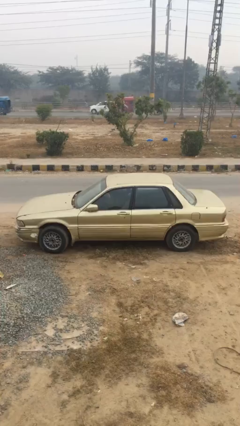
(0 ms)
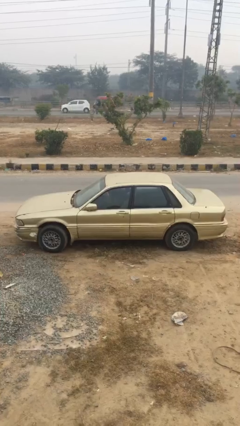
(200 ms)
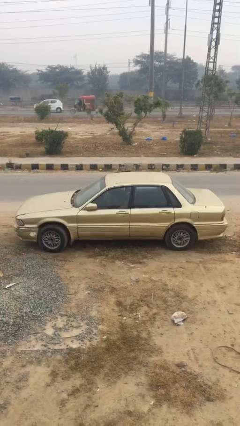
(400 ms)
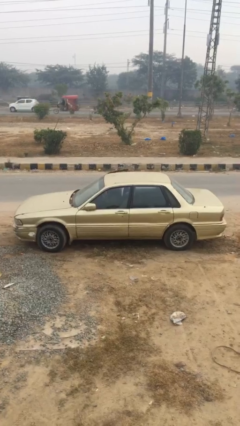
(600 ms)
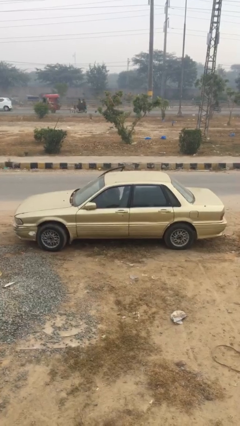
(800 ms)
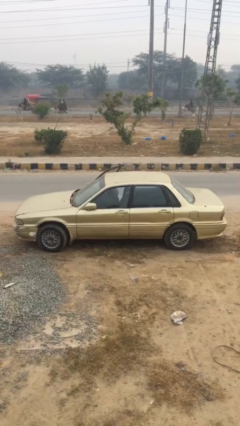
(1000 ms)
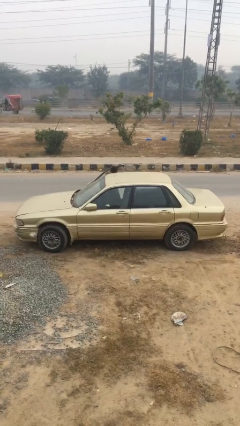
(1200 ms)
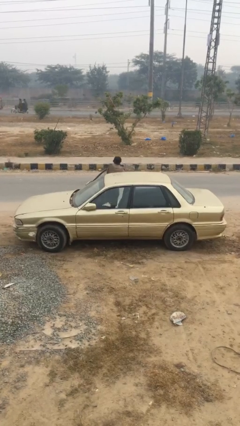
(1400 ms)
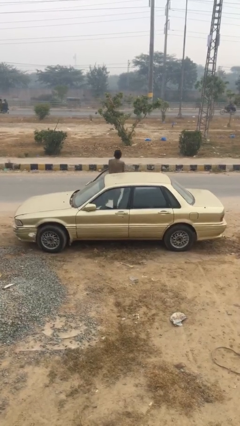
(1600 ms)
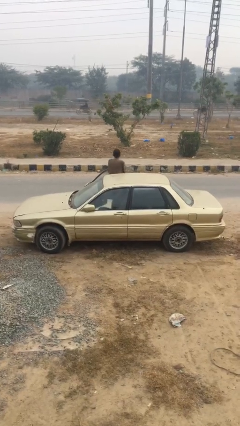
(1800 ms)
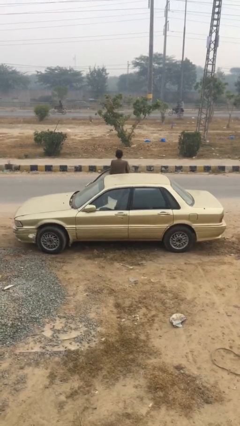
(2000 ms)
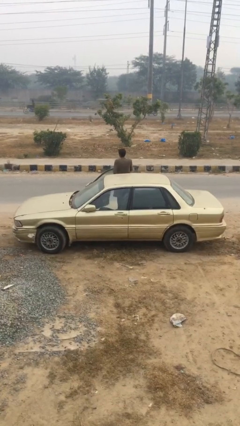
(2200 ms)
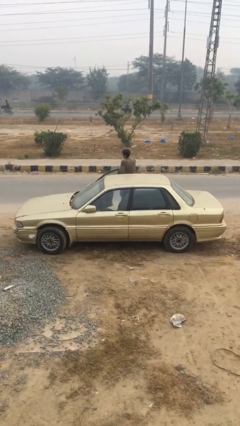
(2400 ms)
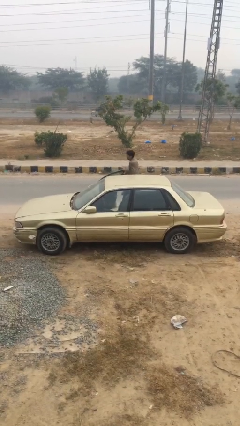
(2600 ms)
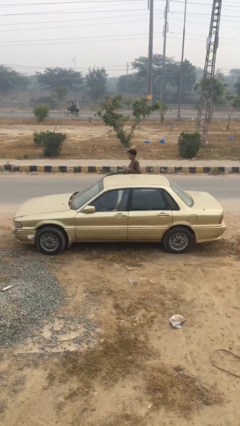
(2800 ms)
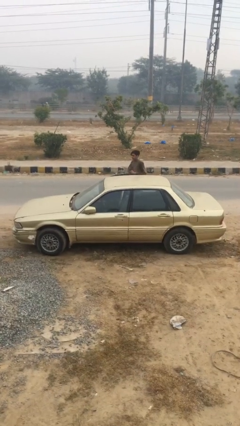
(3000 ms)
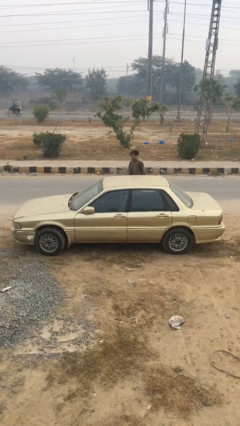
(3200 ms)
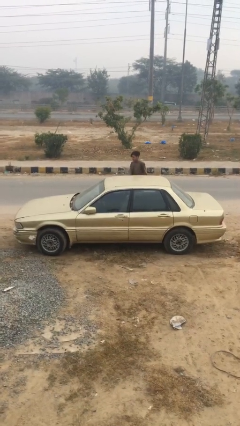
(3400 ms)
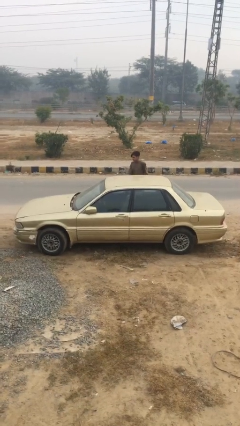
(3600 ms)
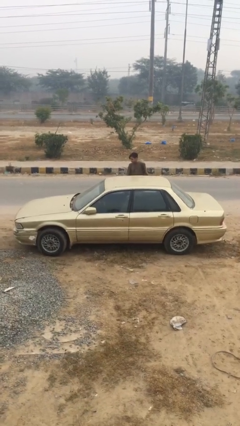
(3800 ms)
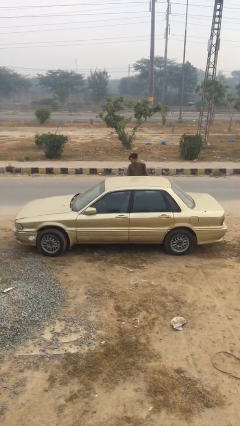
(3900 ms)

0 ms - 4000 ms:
car drops off person

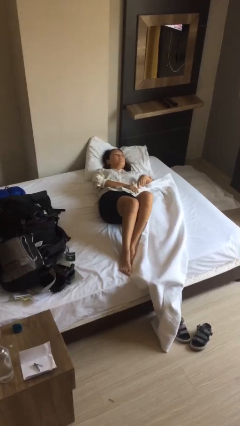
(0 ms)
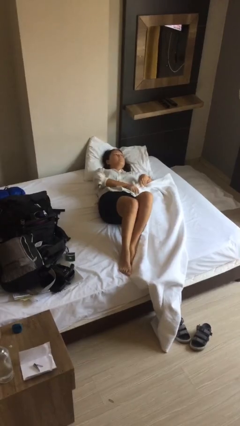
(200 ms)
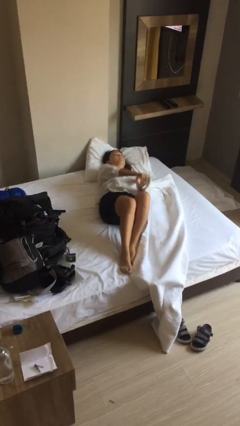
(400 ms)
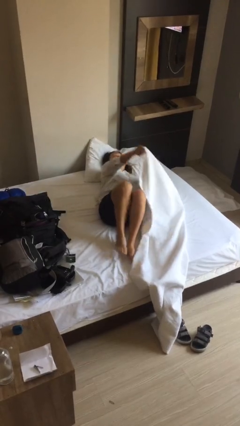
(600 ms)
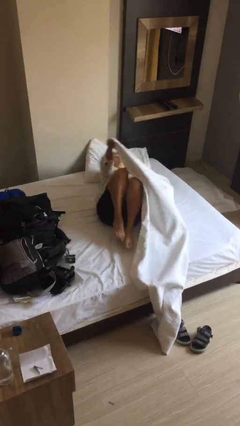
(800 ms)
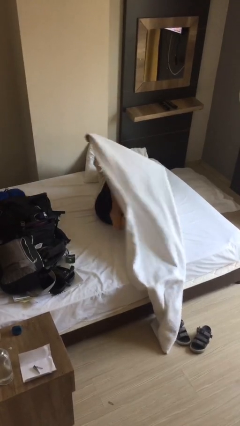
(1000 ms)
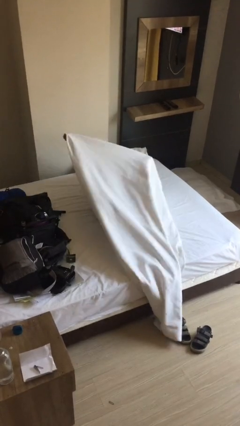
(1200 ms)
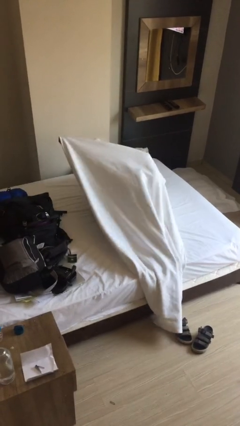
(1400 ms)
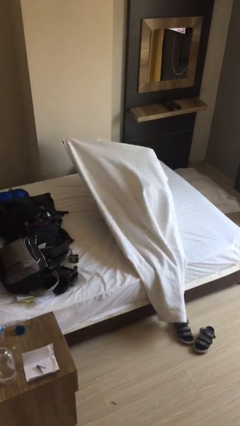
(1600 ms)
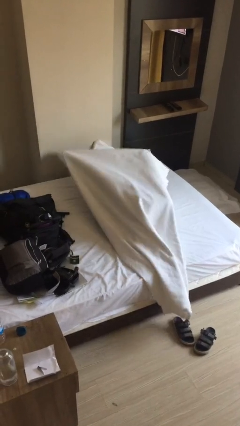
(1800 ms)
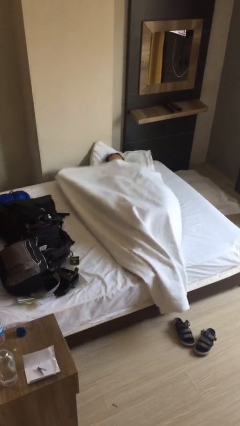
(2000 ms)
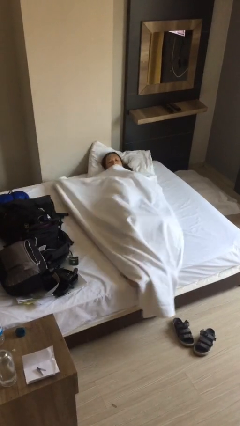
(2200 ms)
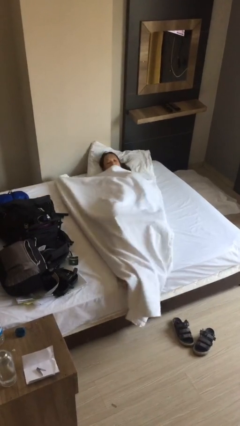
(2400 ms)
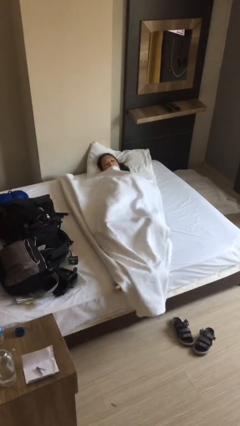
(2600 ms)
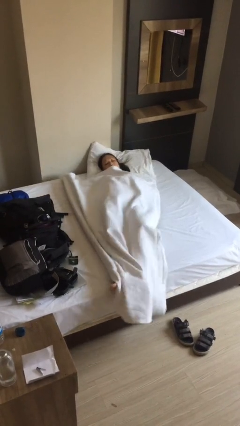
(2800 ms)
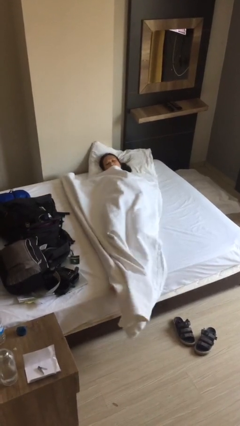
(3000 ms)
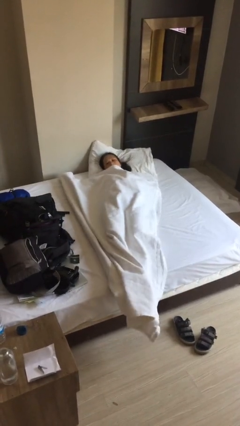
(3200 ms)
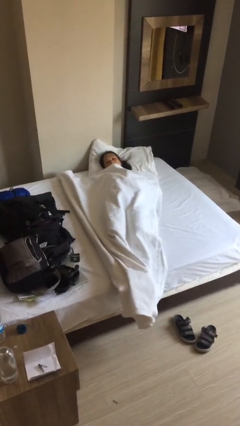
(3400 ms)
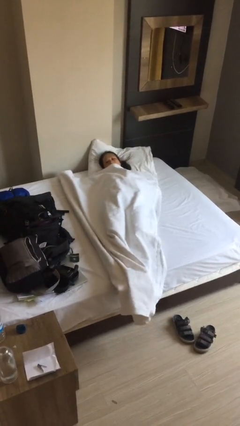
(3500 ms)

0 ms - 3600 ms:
person covers with bedsheets

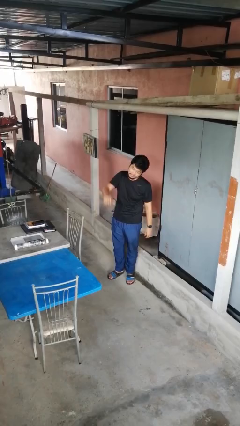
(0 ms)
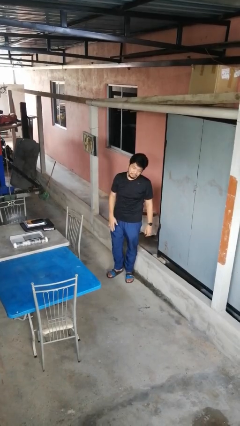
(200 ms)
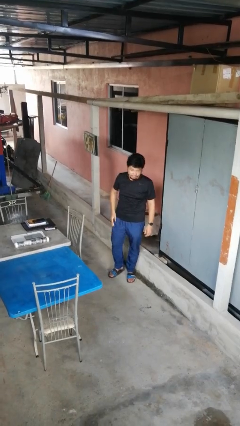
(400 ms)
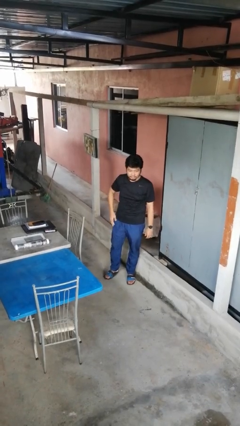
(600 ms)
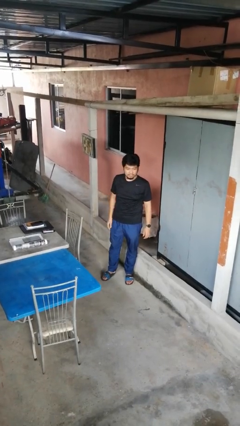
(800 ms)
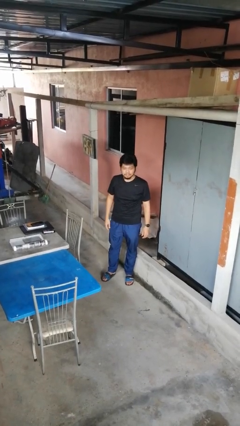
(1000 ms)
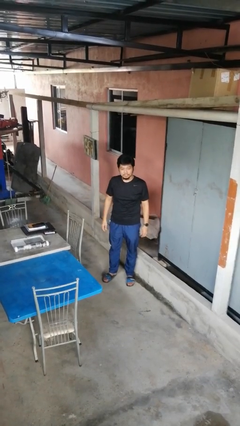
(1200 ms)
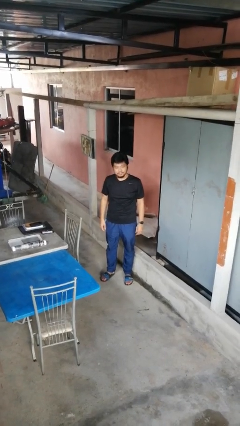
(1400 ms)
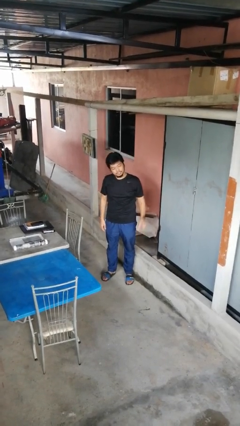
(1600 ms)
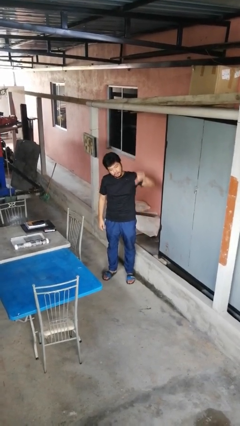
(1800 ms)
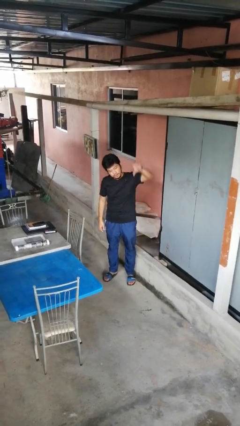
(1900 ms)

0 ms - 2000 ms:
person closes gate

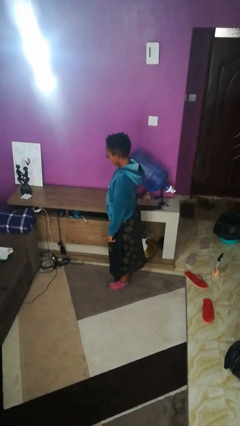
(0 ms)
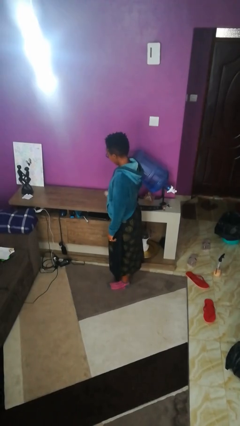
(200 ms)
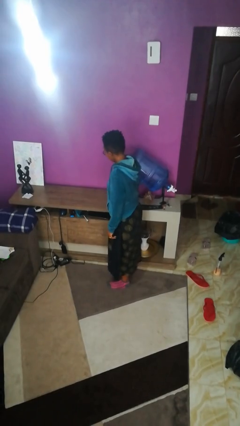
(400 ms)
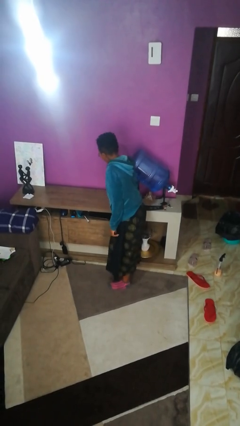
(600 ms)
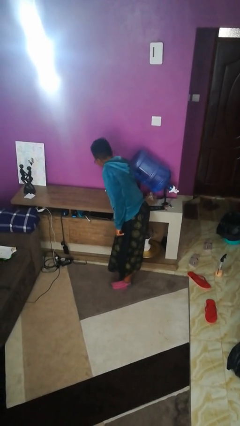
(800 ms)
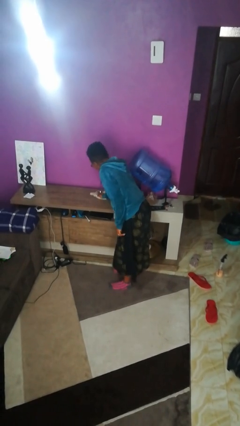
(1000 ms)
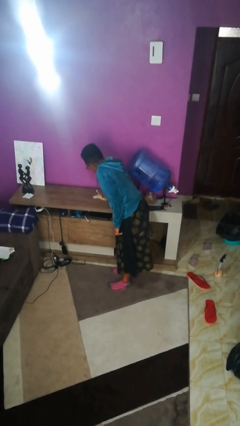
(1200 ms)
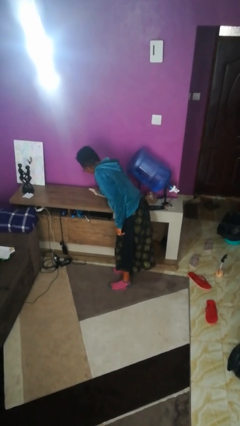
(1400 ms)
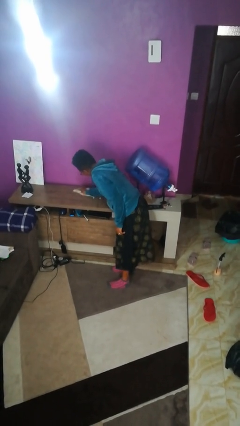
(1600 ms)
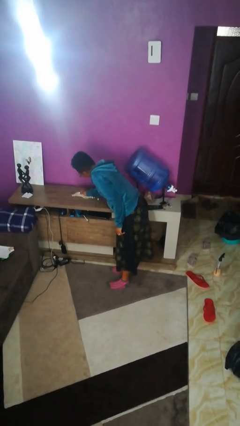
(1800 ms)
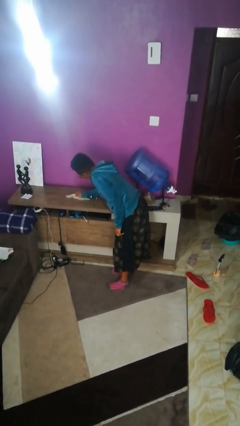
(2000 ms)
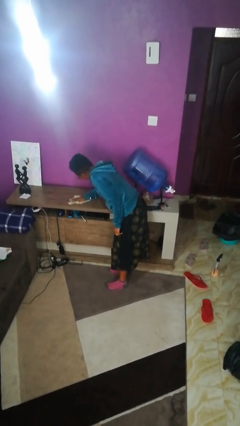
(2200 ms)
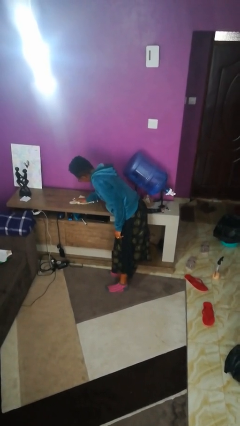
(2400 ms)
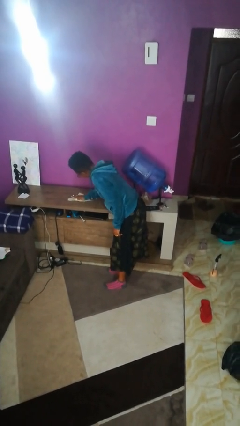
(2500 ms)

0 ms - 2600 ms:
person cleans table with rag

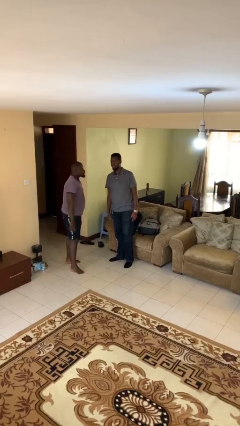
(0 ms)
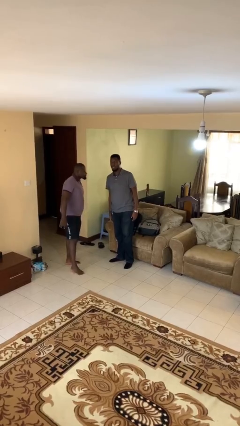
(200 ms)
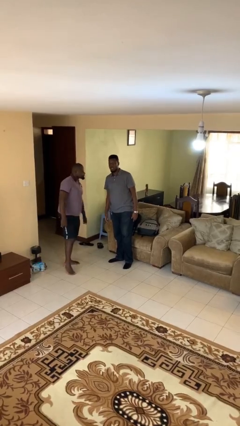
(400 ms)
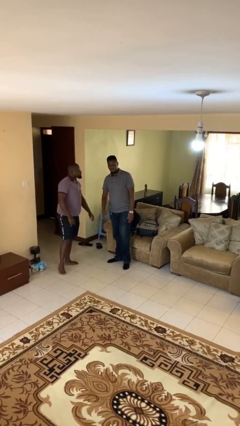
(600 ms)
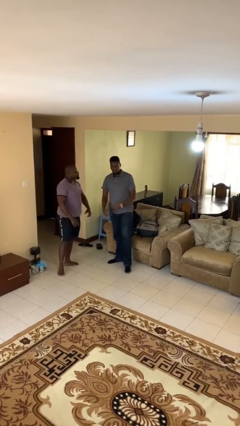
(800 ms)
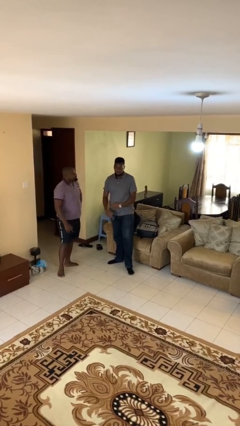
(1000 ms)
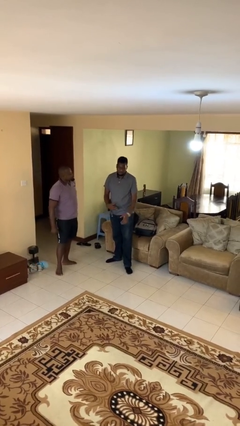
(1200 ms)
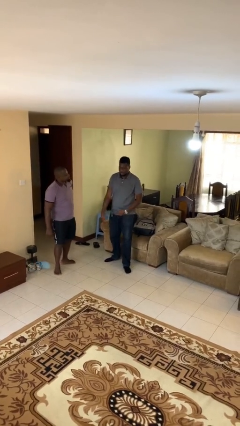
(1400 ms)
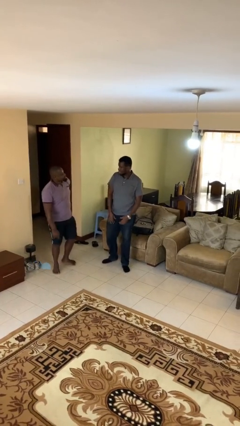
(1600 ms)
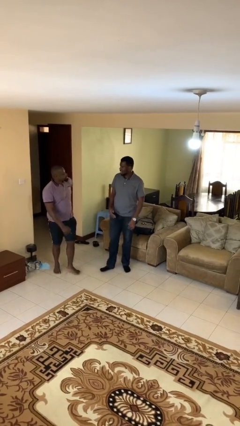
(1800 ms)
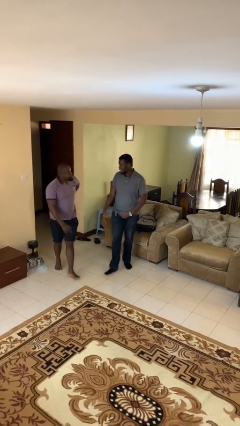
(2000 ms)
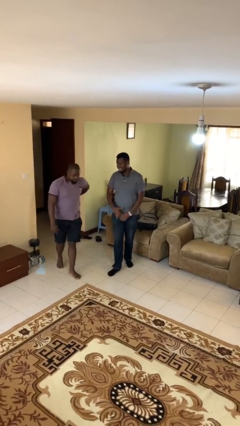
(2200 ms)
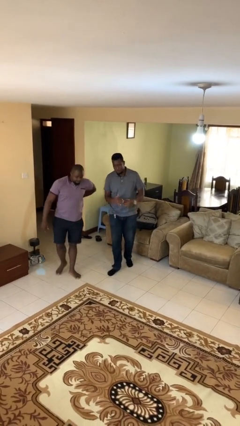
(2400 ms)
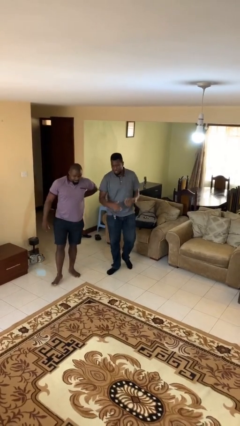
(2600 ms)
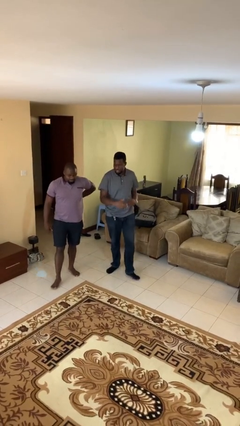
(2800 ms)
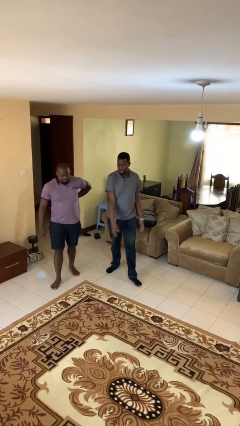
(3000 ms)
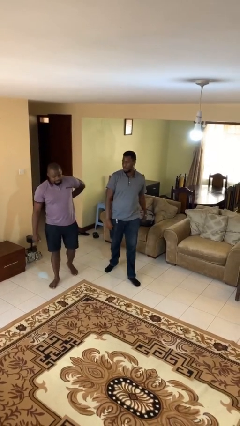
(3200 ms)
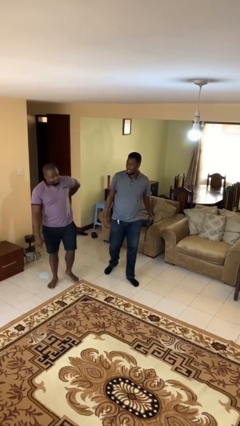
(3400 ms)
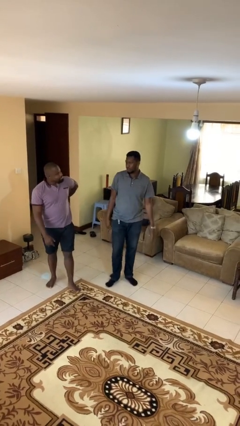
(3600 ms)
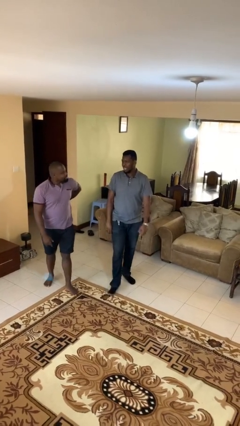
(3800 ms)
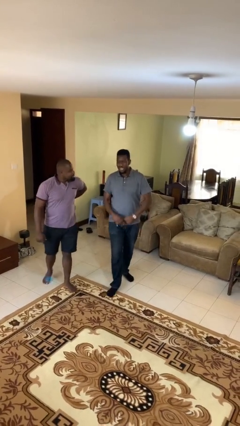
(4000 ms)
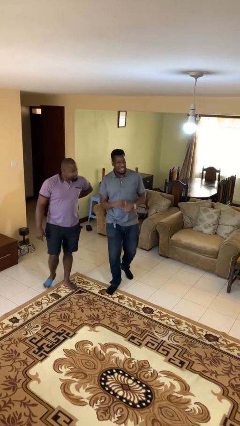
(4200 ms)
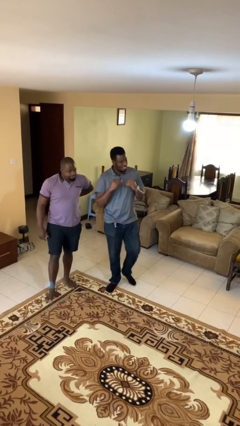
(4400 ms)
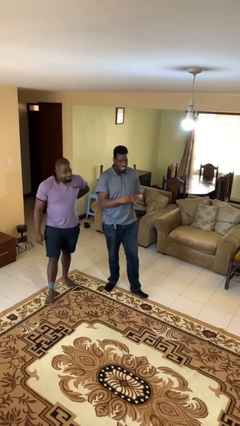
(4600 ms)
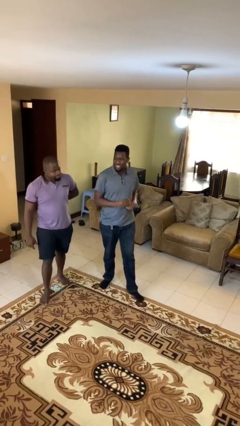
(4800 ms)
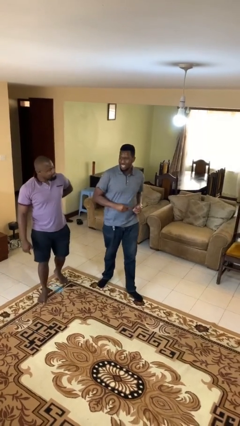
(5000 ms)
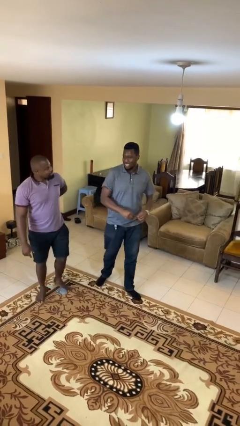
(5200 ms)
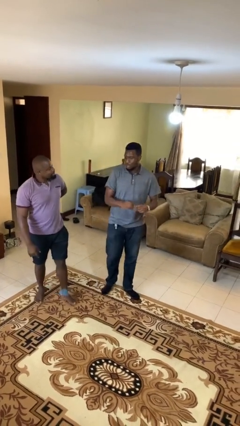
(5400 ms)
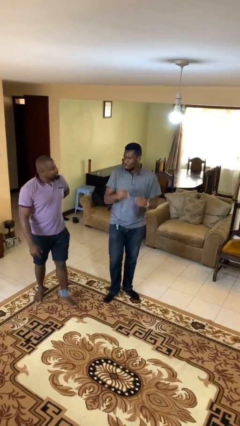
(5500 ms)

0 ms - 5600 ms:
person talks to person

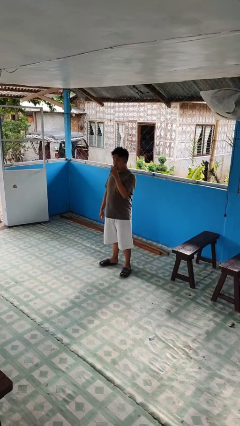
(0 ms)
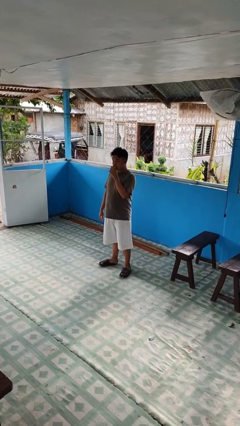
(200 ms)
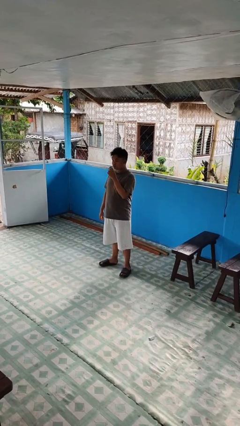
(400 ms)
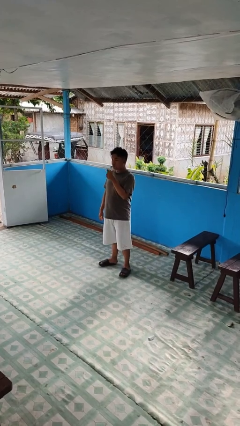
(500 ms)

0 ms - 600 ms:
person eats banana
